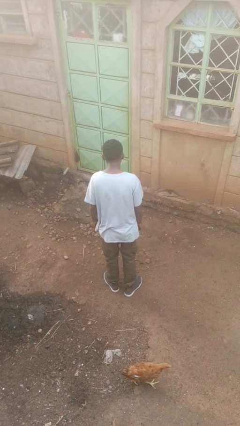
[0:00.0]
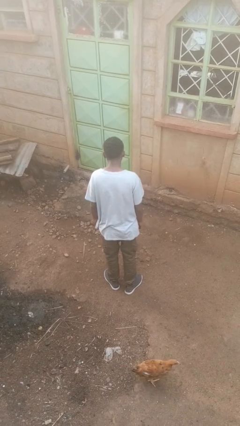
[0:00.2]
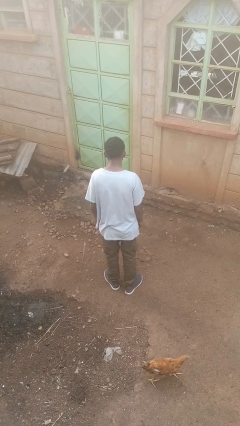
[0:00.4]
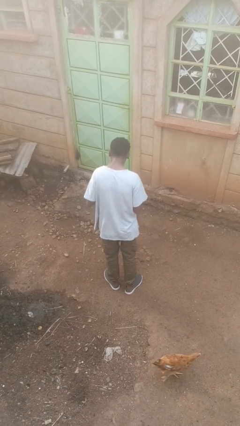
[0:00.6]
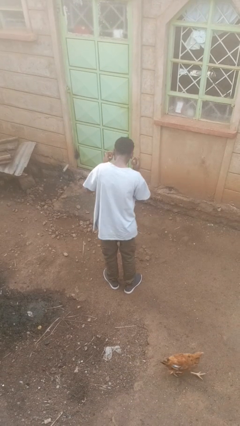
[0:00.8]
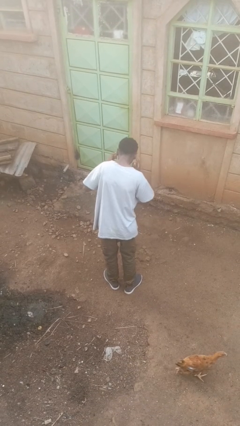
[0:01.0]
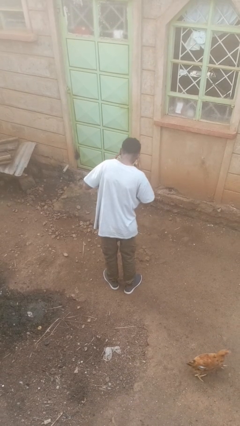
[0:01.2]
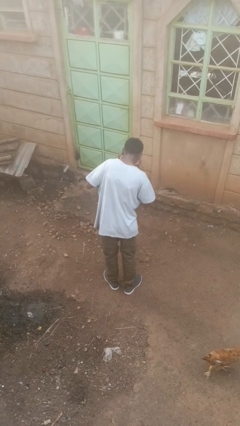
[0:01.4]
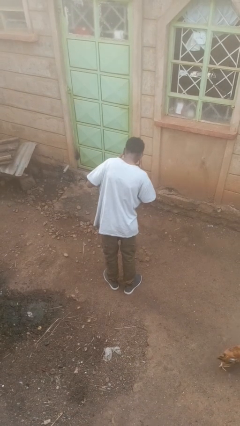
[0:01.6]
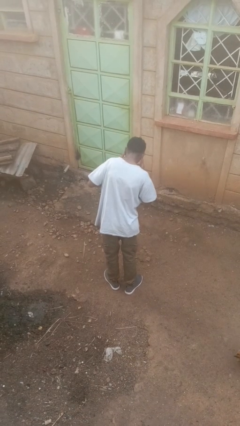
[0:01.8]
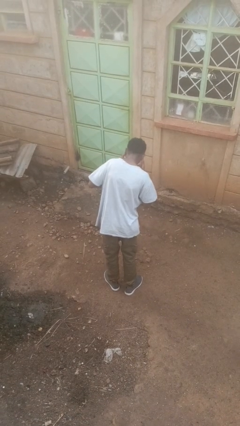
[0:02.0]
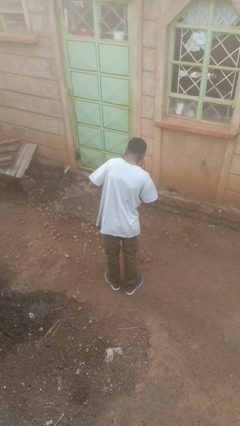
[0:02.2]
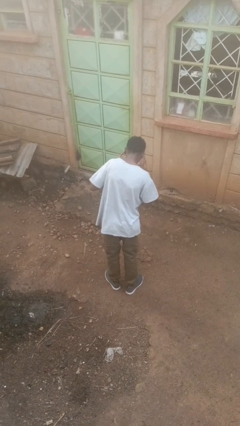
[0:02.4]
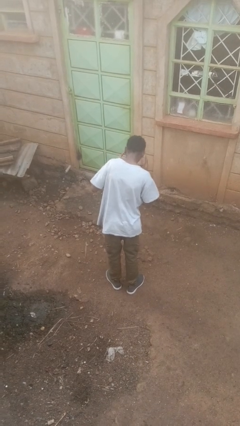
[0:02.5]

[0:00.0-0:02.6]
person puts fingers in ear

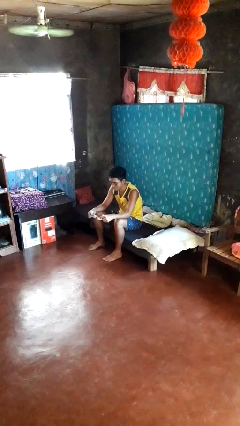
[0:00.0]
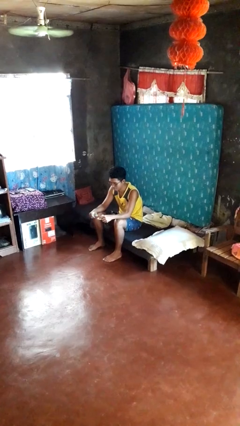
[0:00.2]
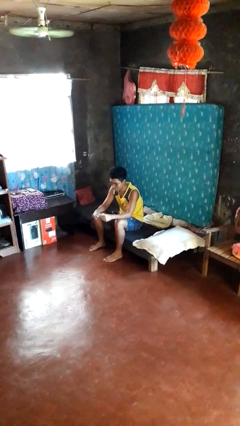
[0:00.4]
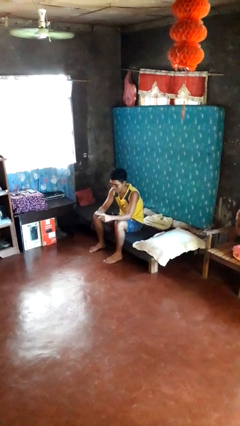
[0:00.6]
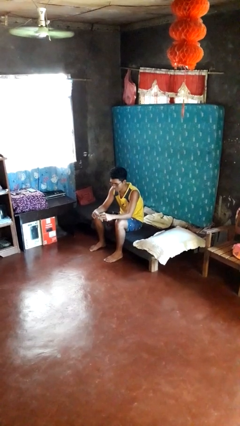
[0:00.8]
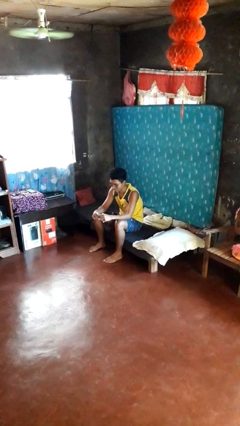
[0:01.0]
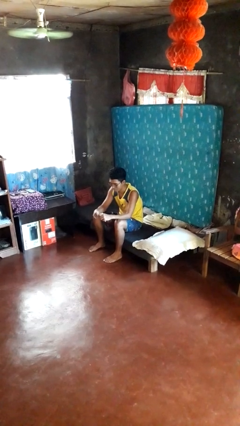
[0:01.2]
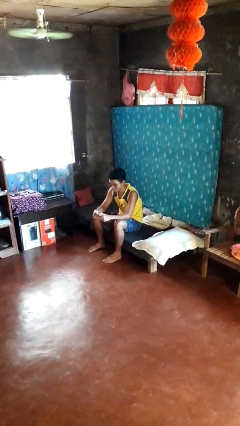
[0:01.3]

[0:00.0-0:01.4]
person tears paper

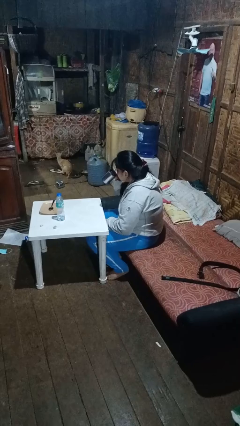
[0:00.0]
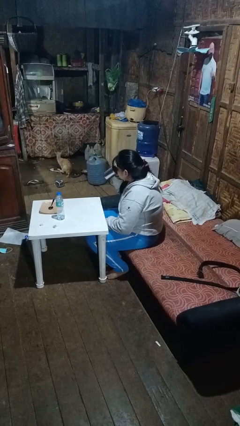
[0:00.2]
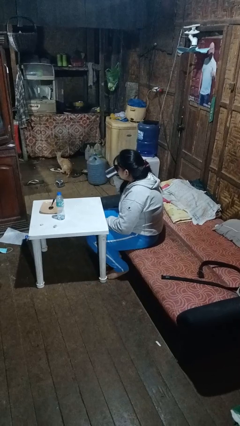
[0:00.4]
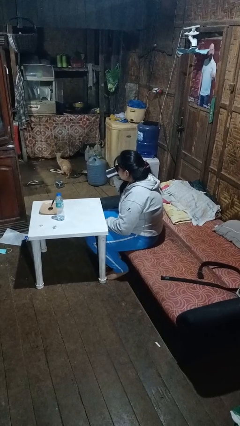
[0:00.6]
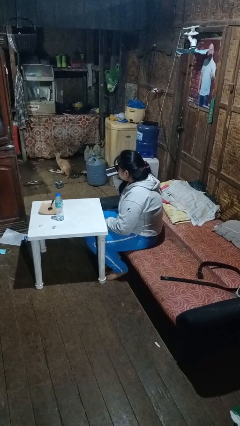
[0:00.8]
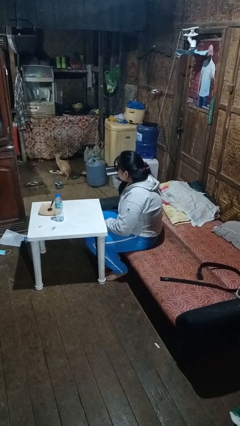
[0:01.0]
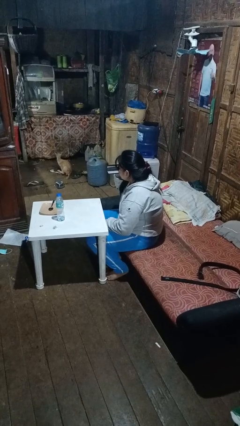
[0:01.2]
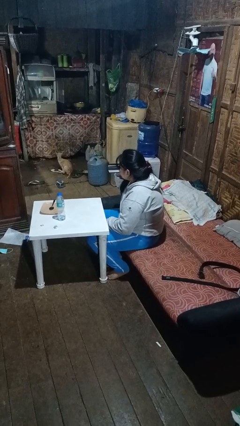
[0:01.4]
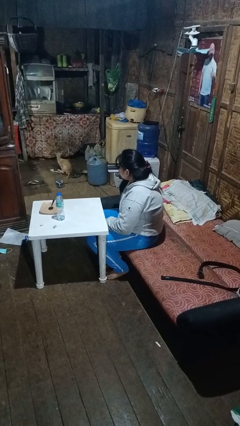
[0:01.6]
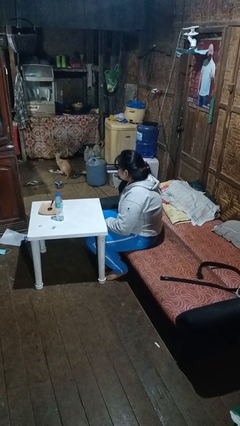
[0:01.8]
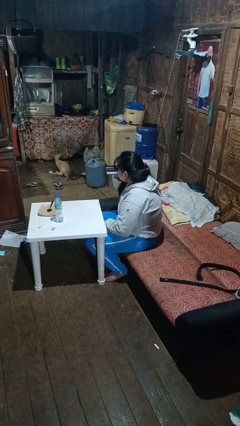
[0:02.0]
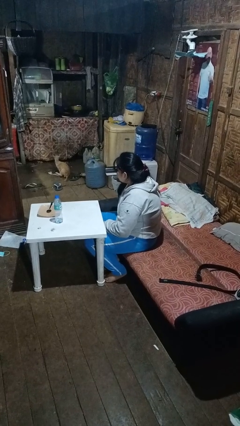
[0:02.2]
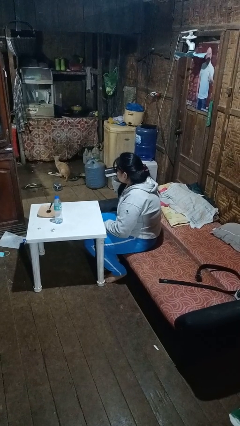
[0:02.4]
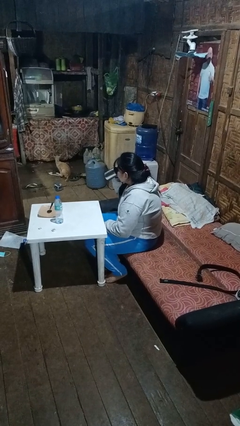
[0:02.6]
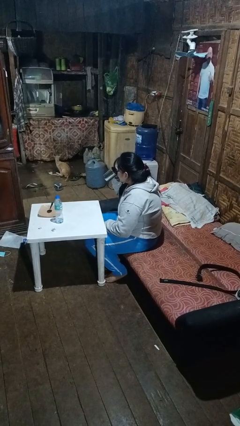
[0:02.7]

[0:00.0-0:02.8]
person drinks from mug

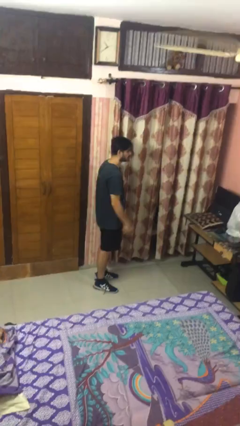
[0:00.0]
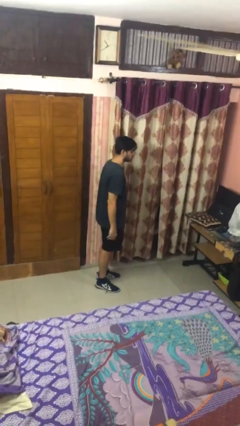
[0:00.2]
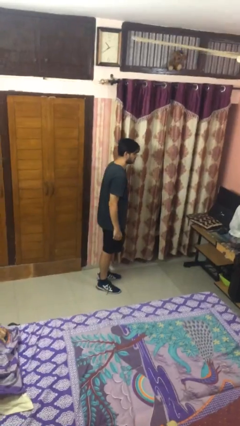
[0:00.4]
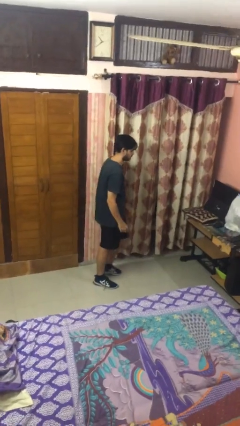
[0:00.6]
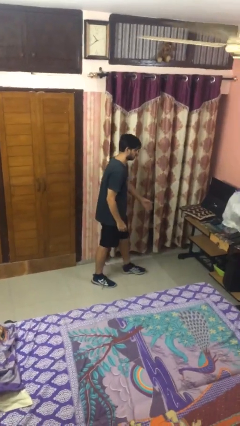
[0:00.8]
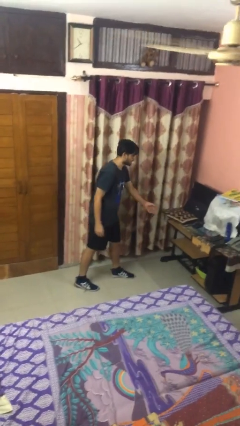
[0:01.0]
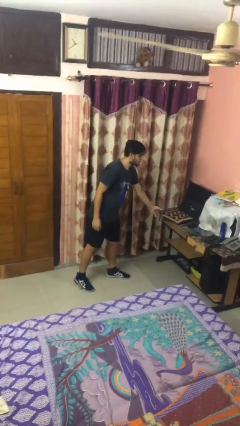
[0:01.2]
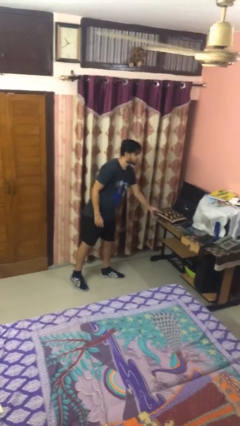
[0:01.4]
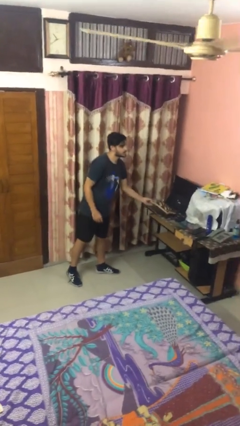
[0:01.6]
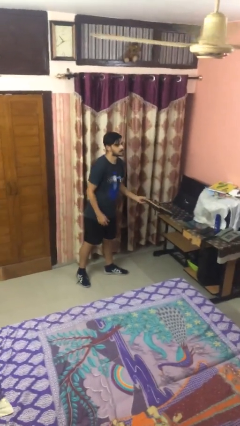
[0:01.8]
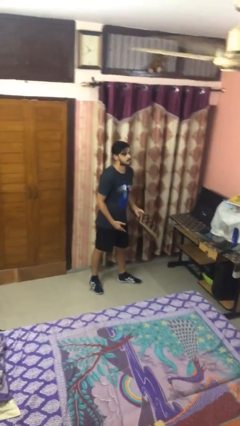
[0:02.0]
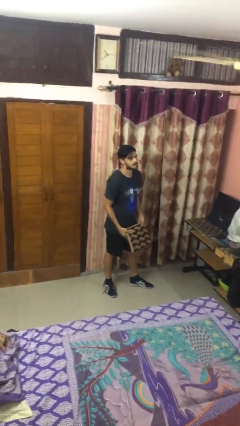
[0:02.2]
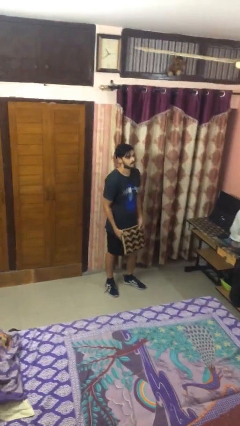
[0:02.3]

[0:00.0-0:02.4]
person picks up object from table

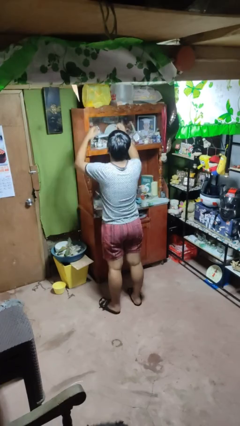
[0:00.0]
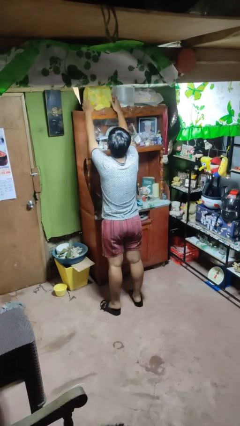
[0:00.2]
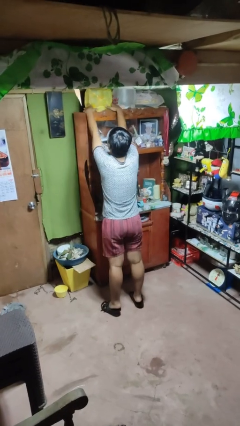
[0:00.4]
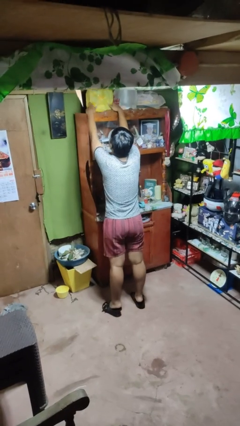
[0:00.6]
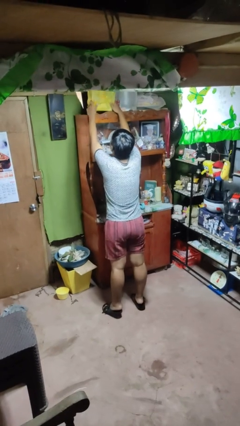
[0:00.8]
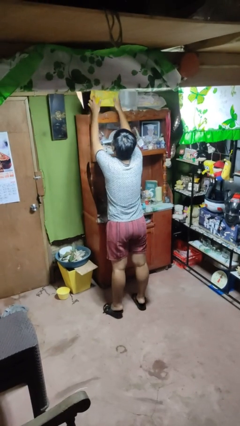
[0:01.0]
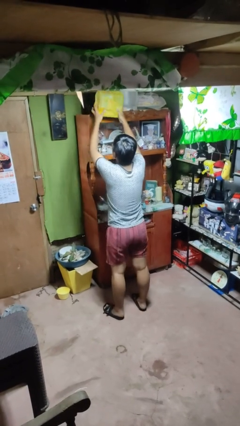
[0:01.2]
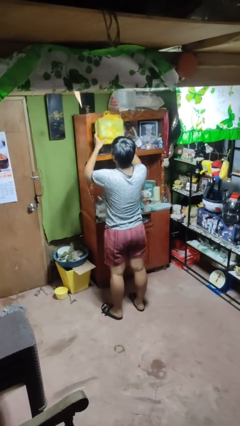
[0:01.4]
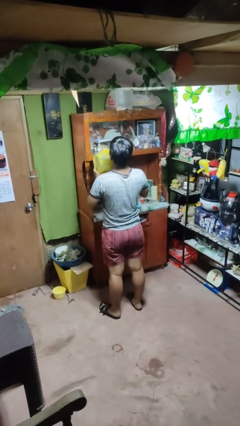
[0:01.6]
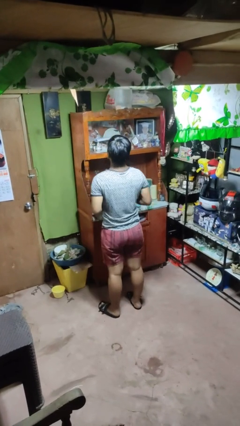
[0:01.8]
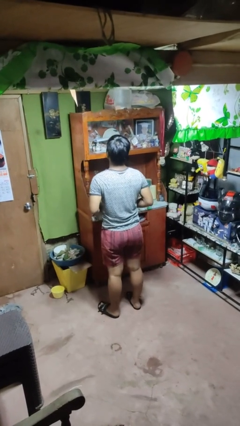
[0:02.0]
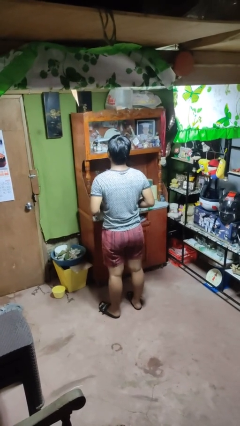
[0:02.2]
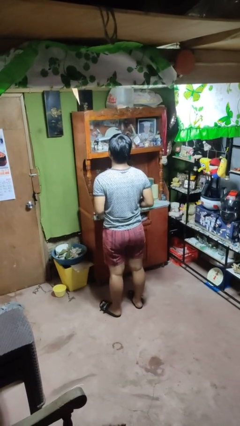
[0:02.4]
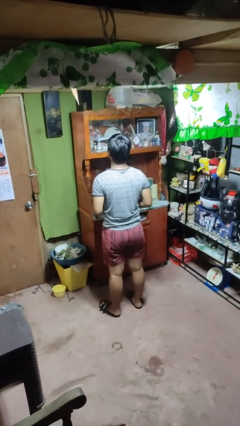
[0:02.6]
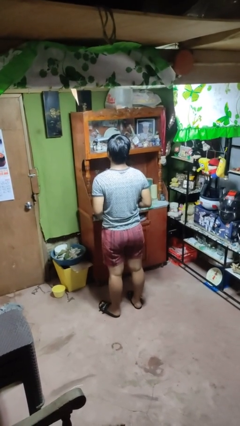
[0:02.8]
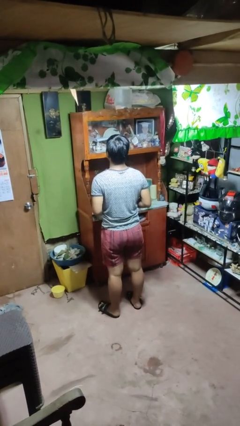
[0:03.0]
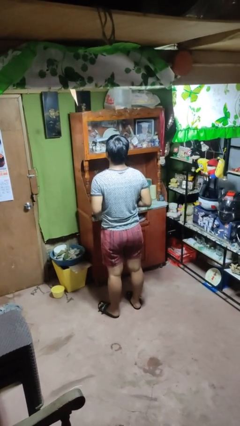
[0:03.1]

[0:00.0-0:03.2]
person picks up object from shelf

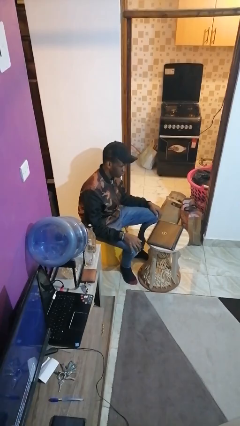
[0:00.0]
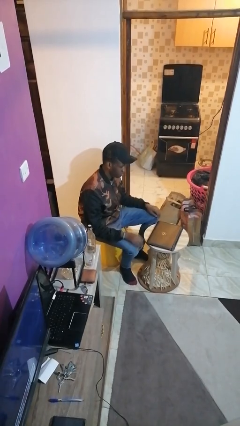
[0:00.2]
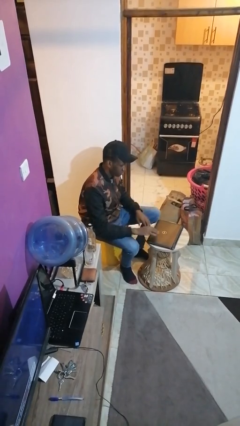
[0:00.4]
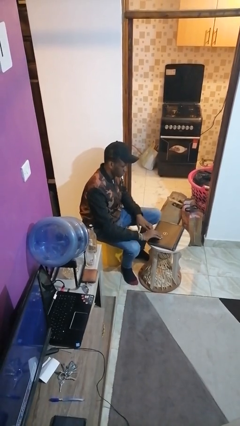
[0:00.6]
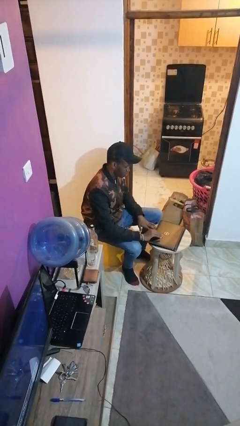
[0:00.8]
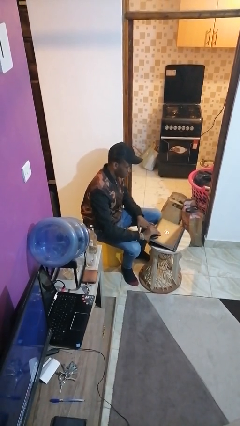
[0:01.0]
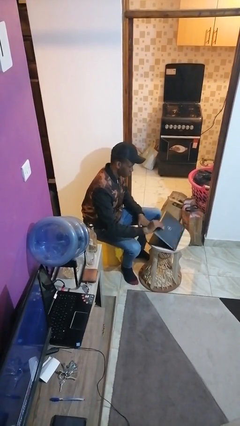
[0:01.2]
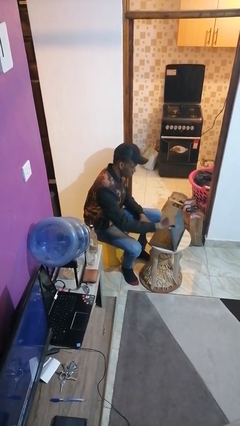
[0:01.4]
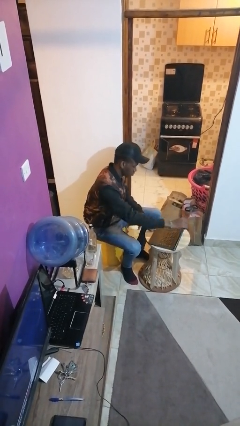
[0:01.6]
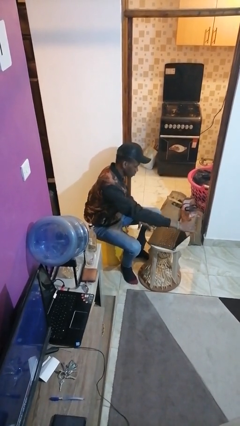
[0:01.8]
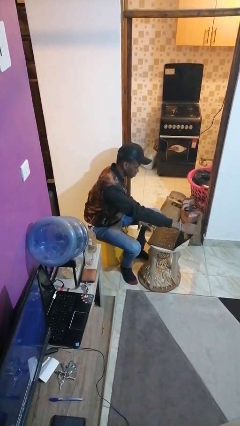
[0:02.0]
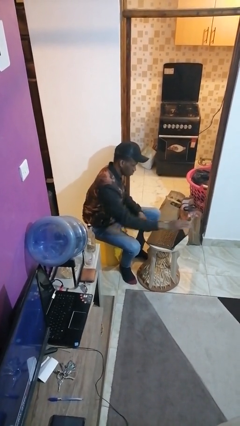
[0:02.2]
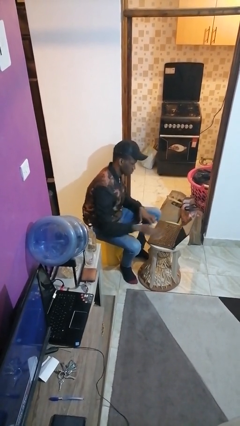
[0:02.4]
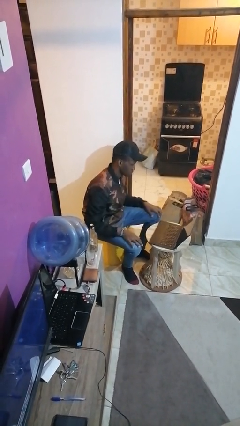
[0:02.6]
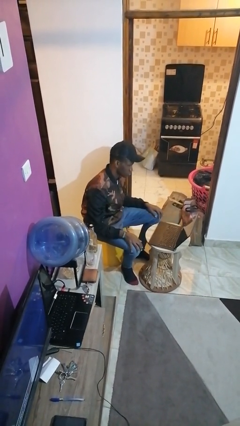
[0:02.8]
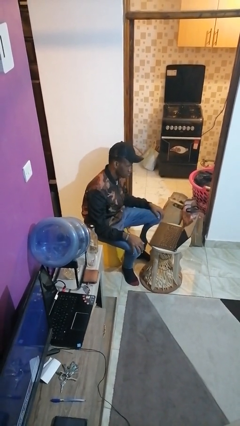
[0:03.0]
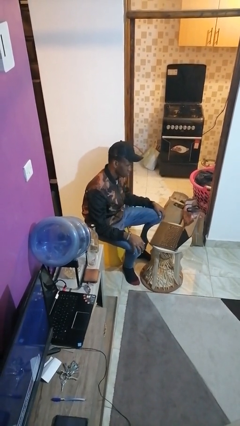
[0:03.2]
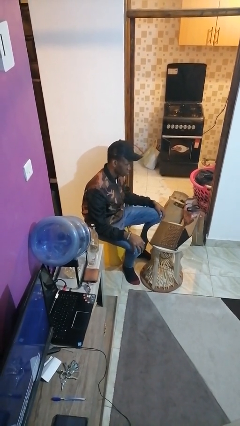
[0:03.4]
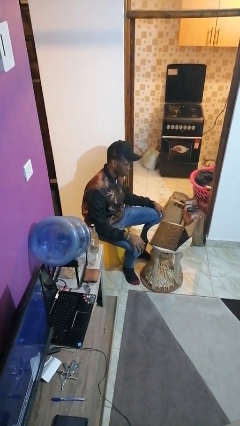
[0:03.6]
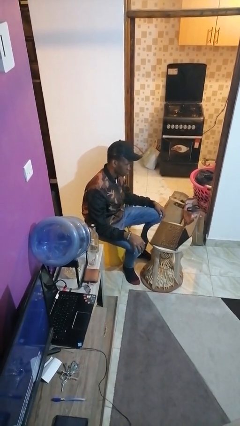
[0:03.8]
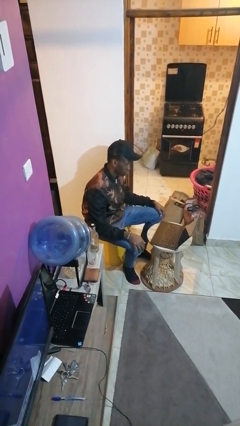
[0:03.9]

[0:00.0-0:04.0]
person opens laptop

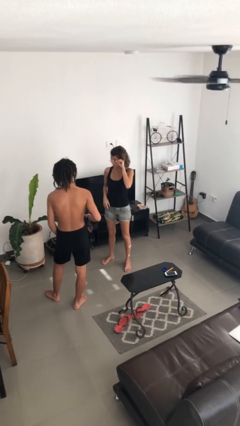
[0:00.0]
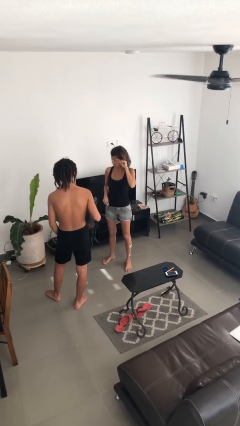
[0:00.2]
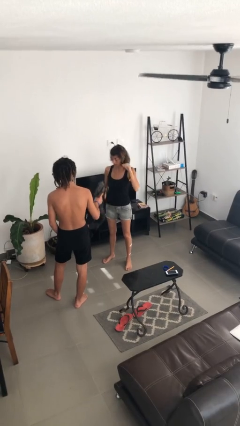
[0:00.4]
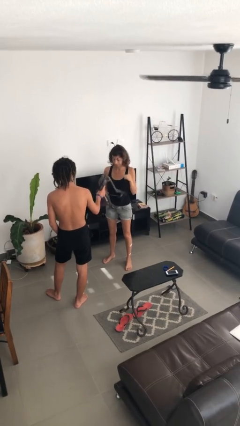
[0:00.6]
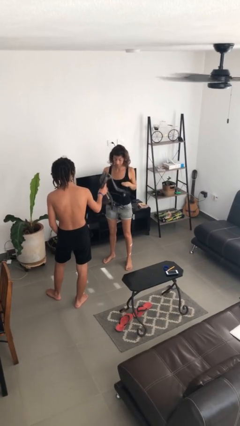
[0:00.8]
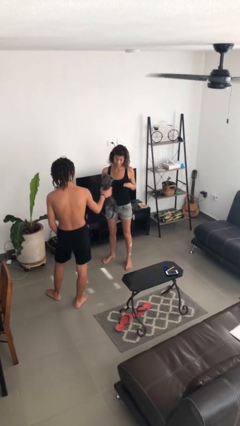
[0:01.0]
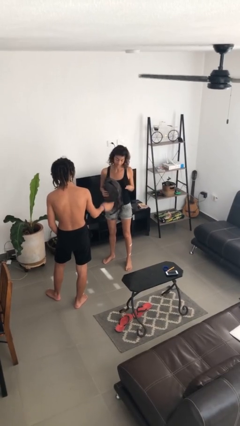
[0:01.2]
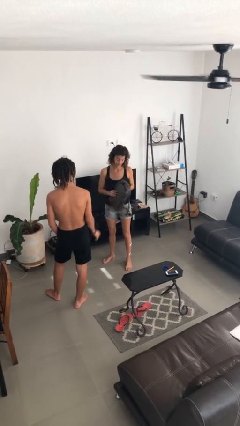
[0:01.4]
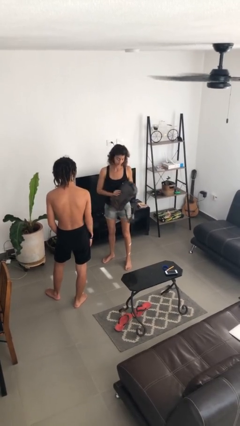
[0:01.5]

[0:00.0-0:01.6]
person transfers object to person
